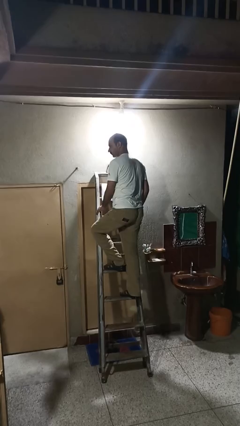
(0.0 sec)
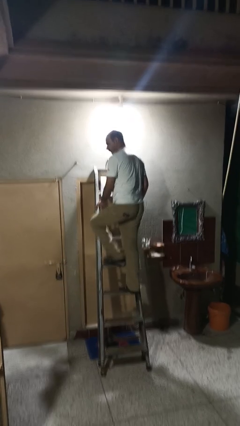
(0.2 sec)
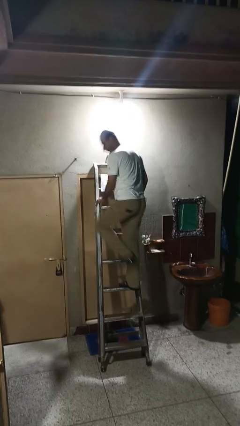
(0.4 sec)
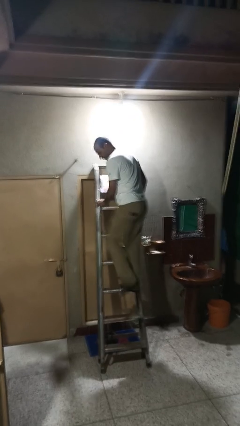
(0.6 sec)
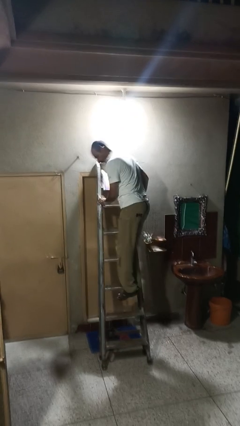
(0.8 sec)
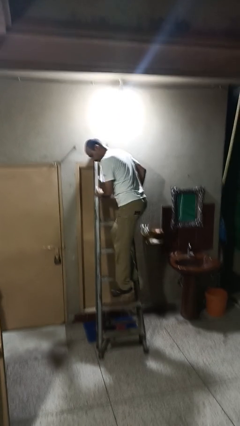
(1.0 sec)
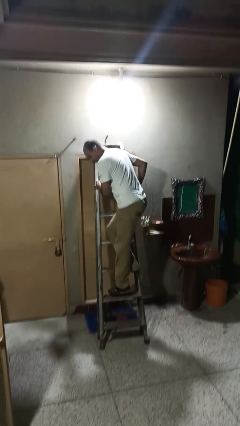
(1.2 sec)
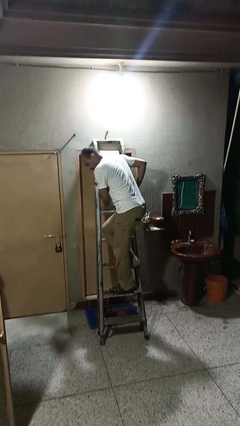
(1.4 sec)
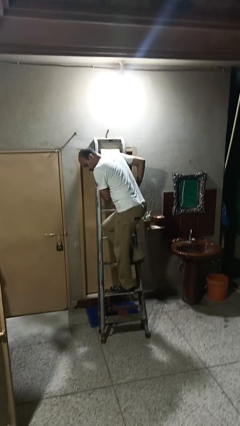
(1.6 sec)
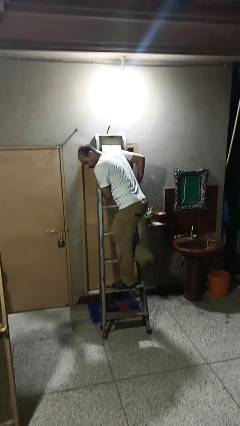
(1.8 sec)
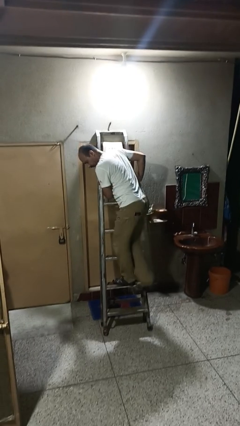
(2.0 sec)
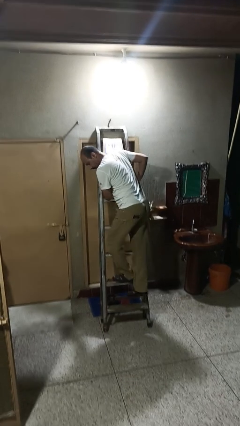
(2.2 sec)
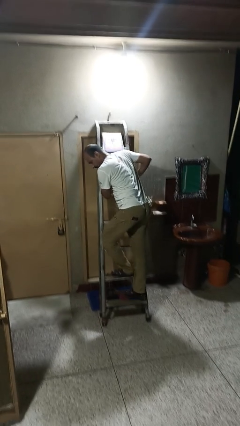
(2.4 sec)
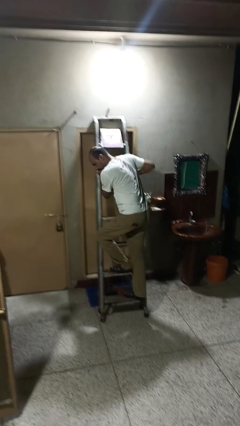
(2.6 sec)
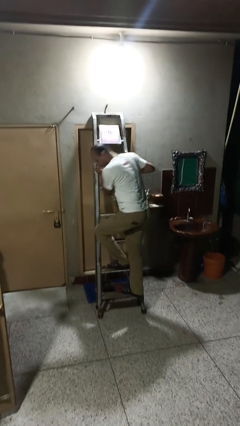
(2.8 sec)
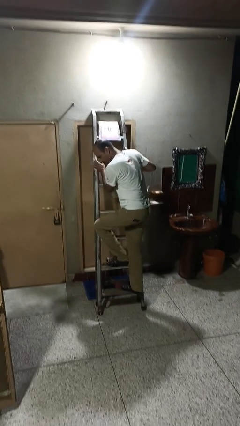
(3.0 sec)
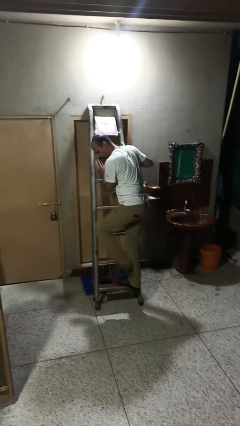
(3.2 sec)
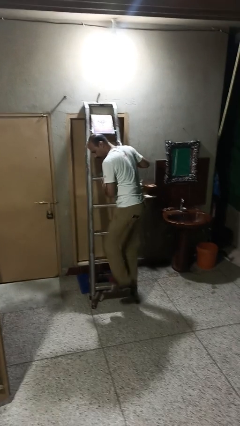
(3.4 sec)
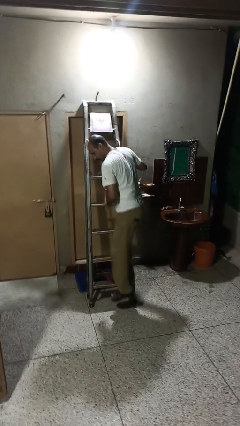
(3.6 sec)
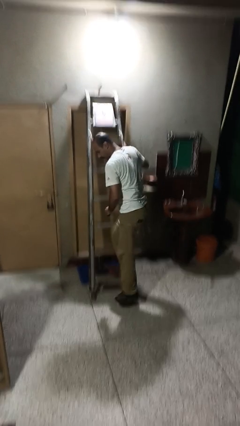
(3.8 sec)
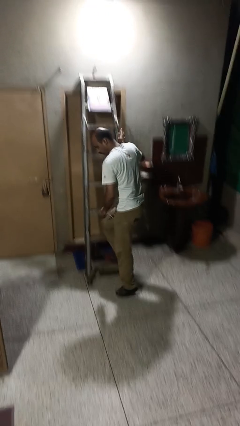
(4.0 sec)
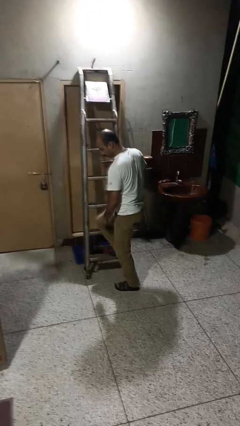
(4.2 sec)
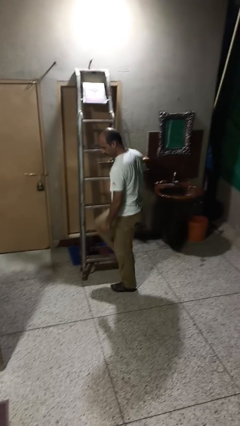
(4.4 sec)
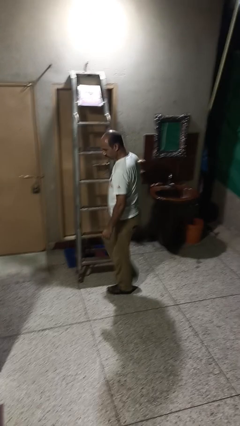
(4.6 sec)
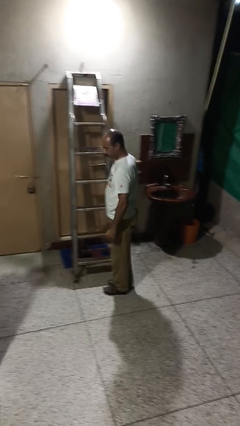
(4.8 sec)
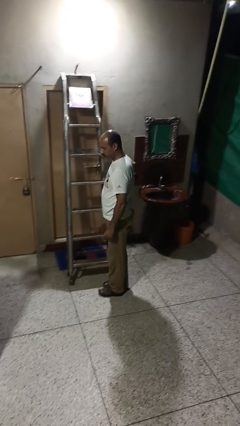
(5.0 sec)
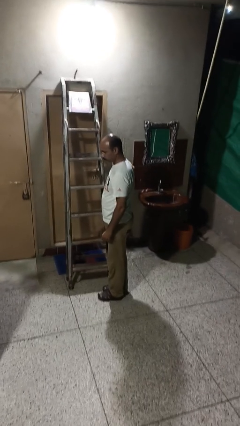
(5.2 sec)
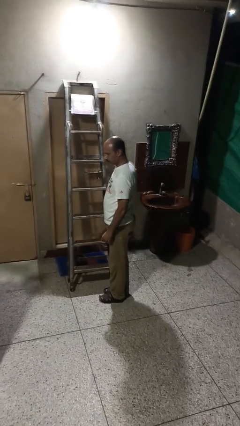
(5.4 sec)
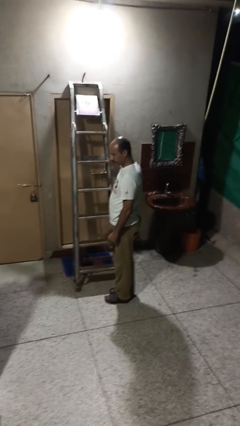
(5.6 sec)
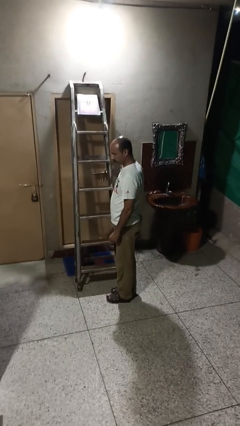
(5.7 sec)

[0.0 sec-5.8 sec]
person climbs down ladder

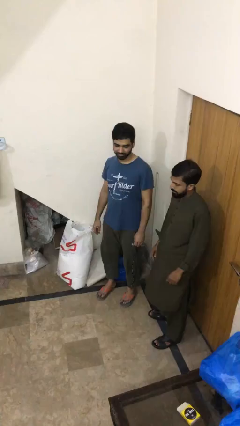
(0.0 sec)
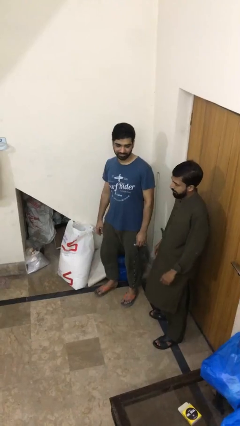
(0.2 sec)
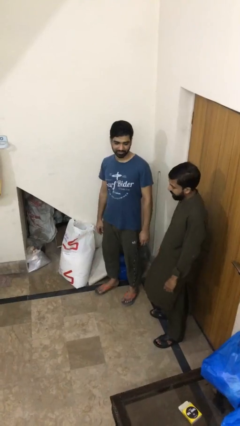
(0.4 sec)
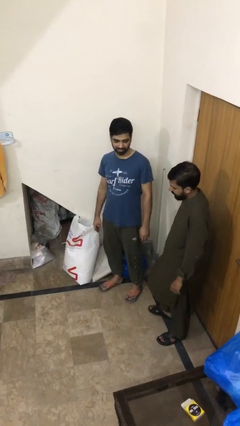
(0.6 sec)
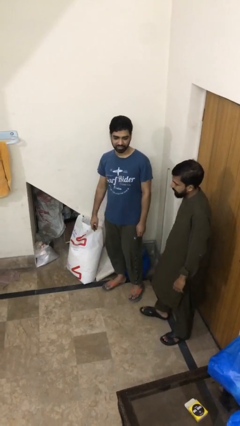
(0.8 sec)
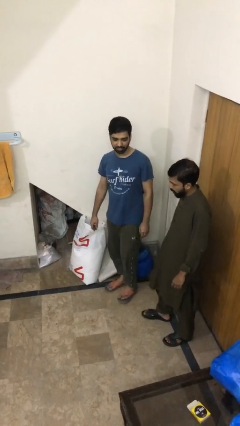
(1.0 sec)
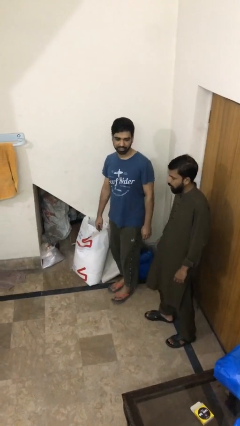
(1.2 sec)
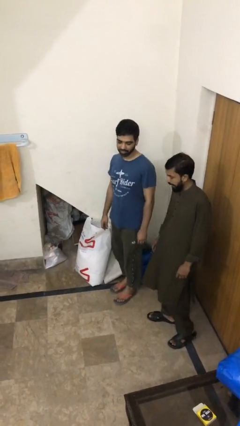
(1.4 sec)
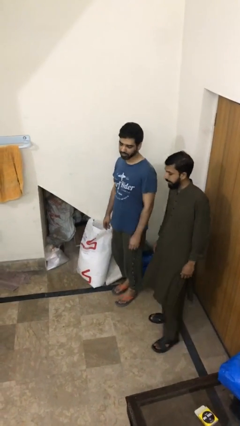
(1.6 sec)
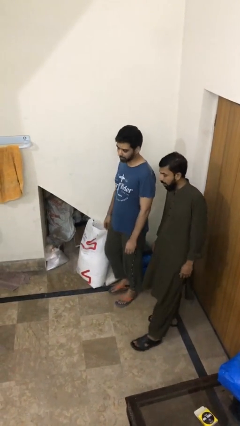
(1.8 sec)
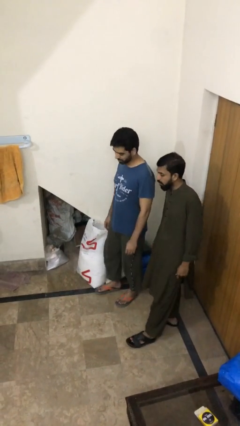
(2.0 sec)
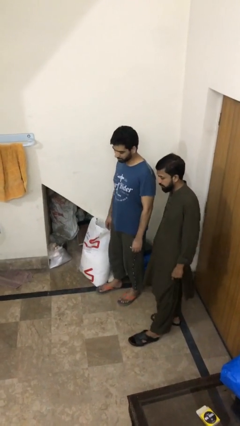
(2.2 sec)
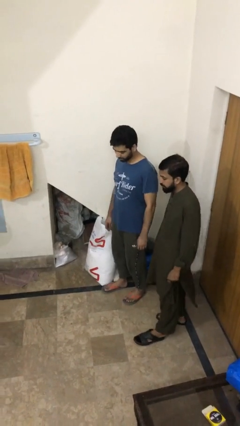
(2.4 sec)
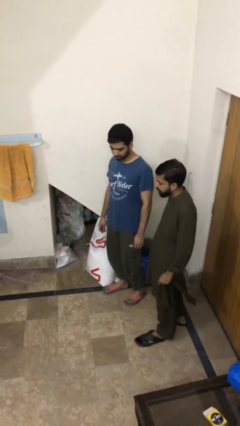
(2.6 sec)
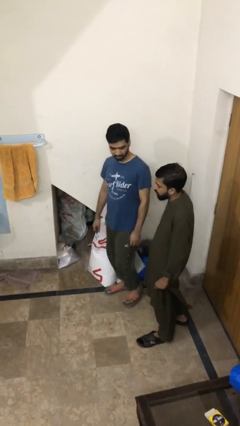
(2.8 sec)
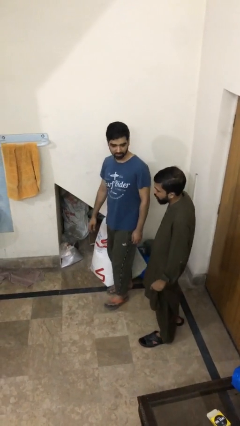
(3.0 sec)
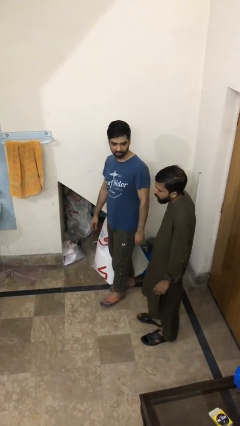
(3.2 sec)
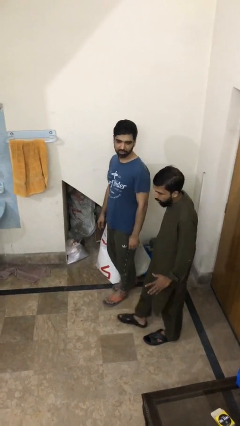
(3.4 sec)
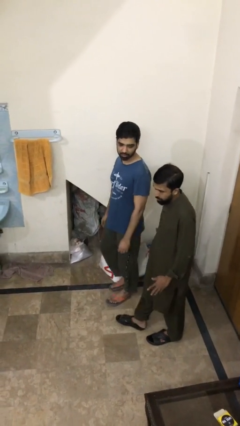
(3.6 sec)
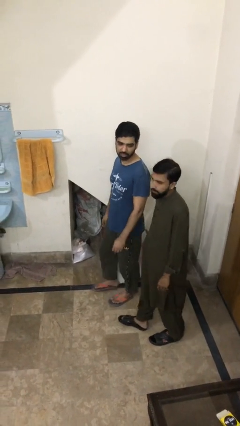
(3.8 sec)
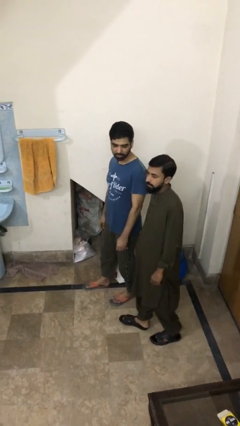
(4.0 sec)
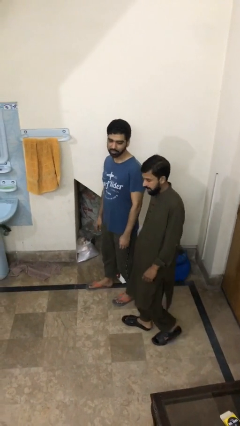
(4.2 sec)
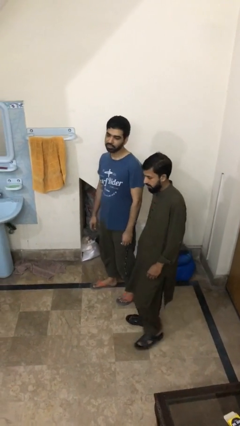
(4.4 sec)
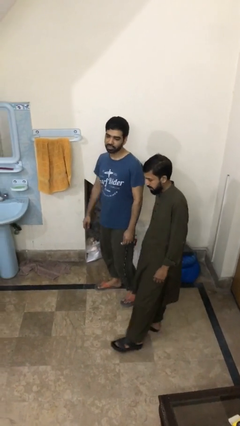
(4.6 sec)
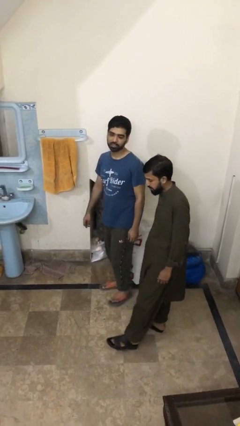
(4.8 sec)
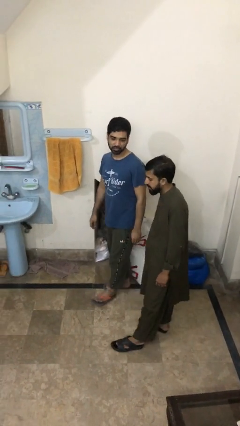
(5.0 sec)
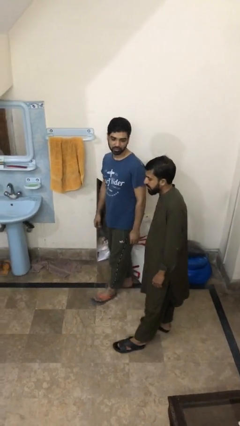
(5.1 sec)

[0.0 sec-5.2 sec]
person talks to person

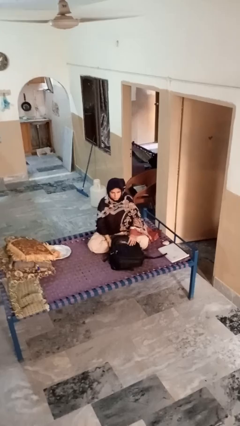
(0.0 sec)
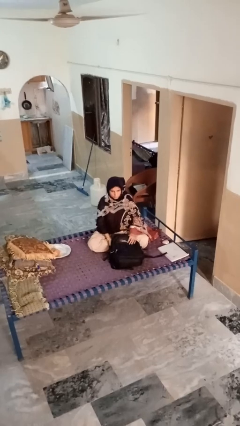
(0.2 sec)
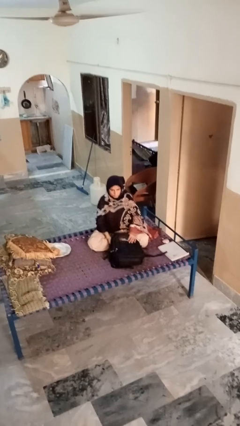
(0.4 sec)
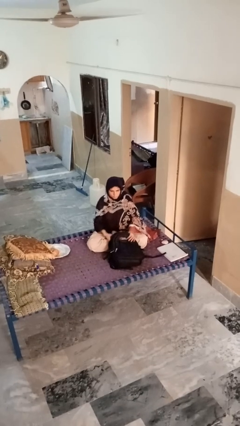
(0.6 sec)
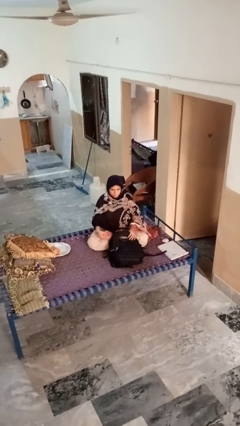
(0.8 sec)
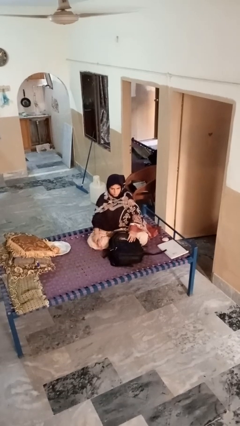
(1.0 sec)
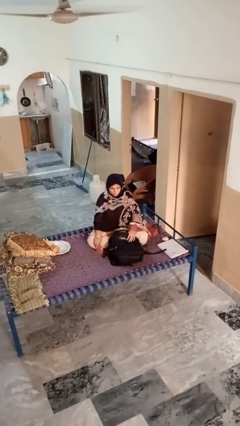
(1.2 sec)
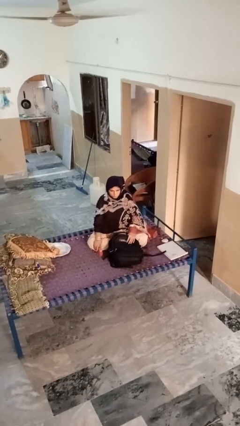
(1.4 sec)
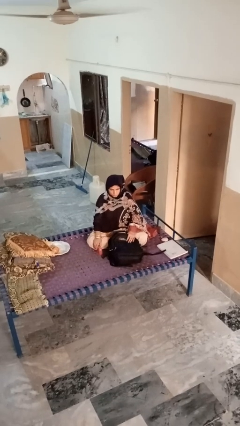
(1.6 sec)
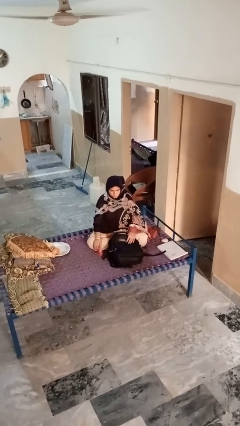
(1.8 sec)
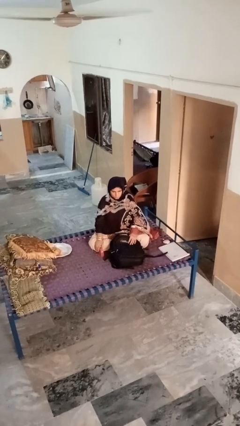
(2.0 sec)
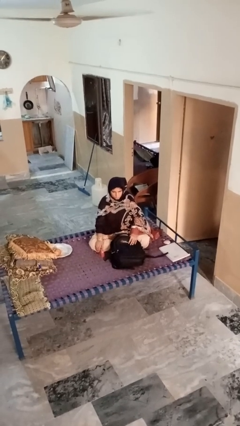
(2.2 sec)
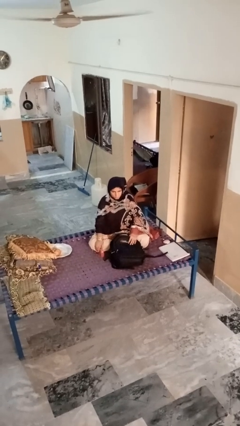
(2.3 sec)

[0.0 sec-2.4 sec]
person takes object from bag

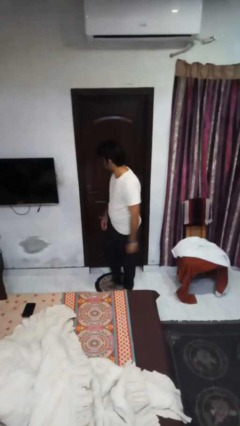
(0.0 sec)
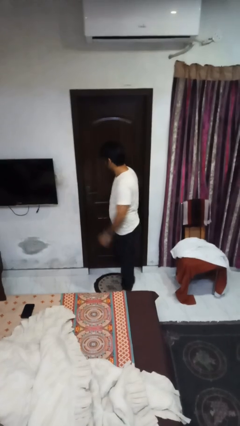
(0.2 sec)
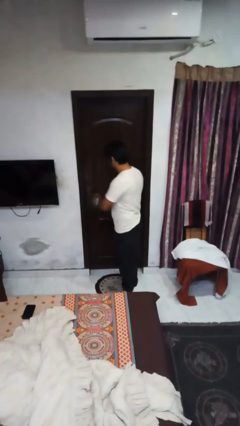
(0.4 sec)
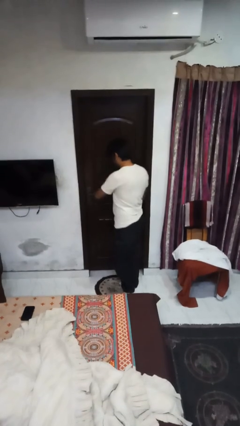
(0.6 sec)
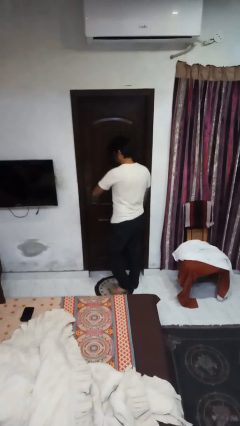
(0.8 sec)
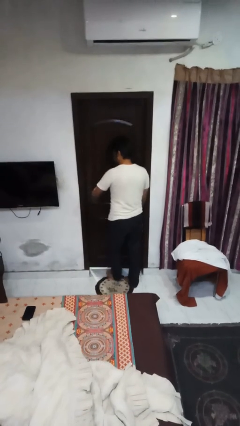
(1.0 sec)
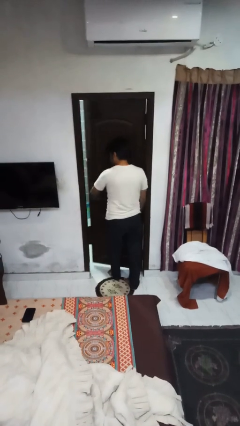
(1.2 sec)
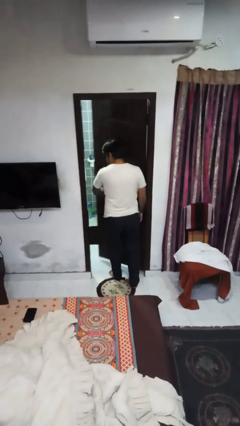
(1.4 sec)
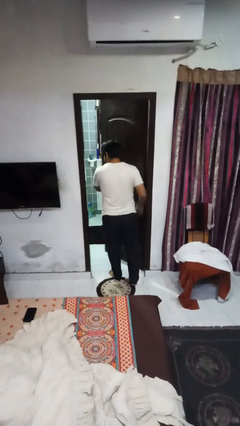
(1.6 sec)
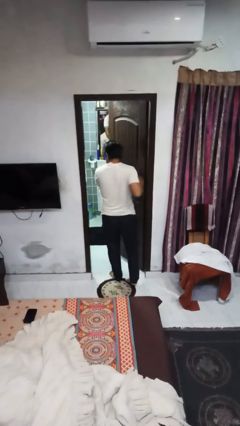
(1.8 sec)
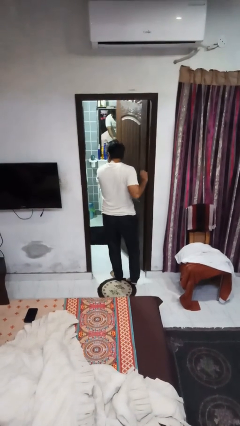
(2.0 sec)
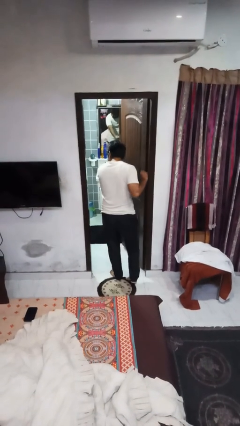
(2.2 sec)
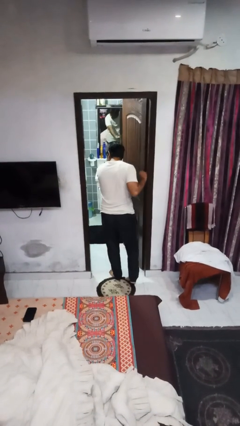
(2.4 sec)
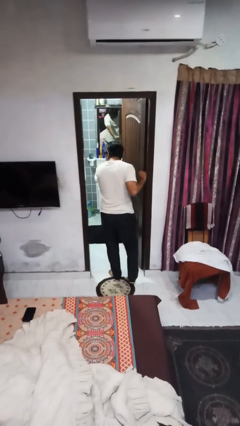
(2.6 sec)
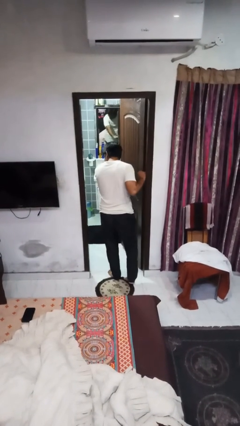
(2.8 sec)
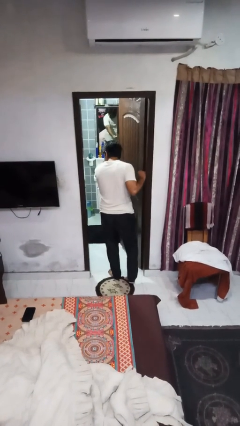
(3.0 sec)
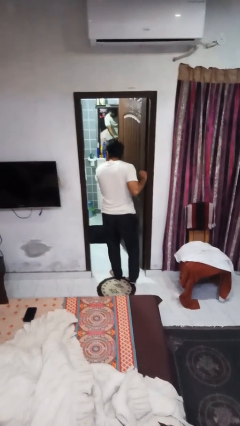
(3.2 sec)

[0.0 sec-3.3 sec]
person opens facility door

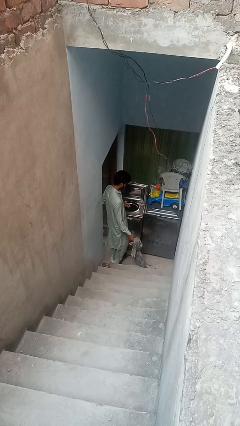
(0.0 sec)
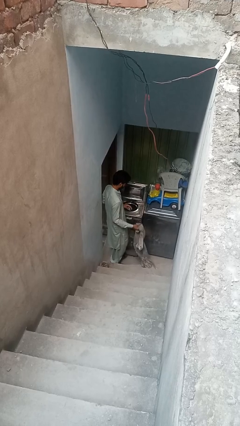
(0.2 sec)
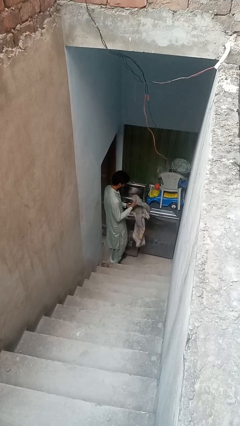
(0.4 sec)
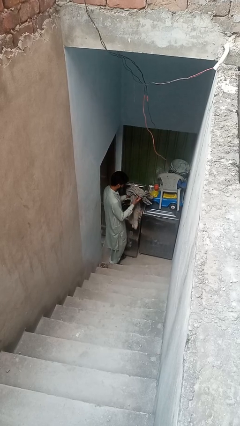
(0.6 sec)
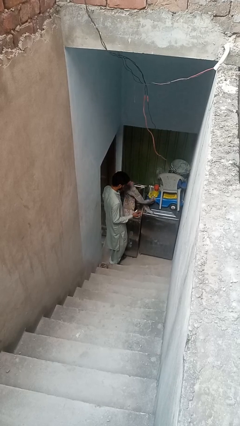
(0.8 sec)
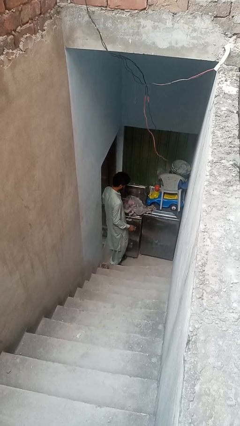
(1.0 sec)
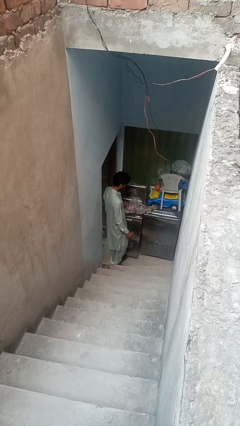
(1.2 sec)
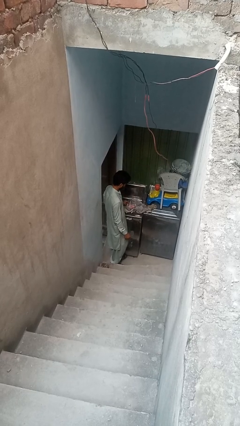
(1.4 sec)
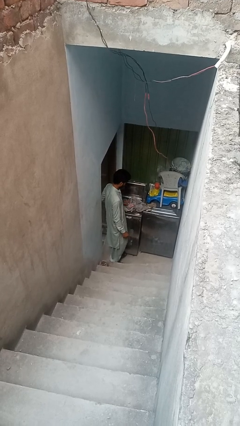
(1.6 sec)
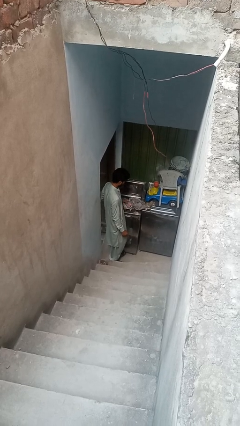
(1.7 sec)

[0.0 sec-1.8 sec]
person loads clotheswasher
